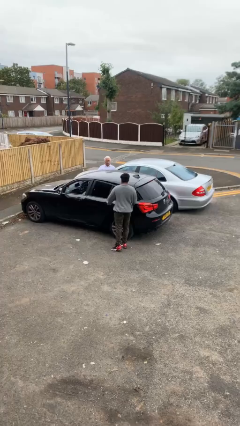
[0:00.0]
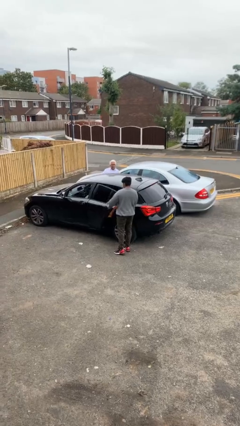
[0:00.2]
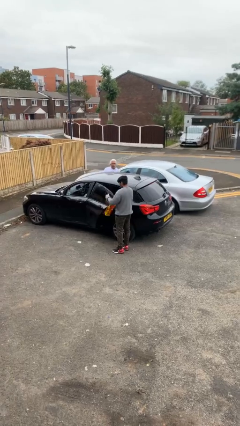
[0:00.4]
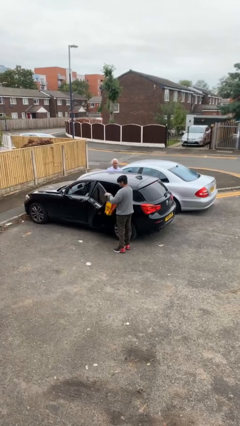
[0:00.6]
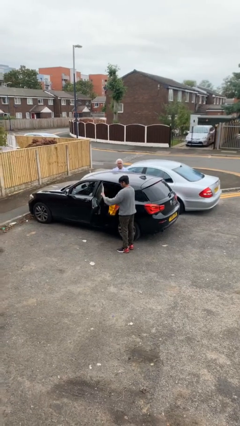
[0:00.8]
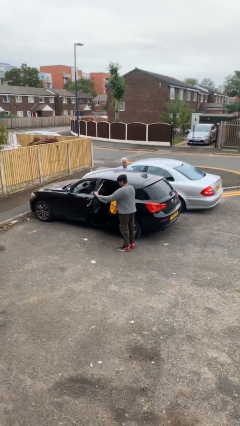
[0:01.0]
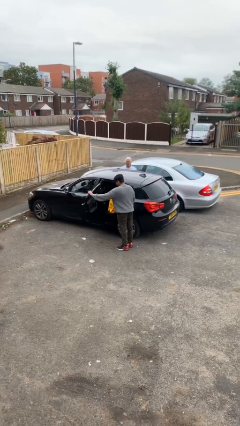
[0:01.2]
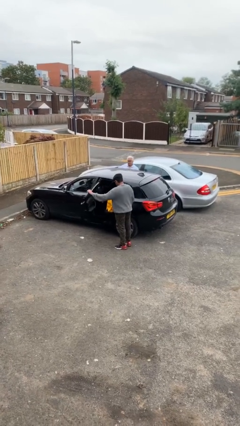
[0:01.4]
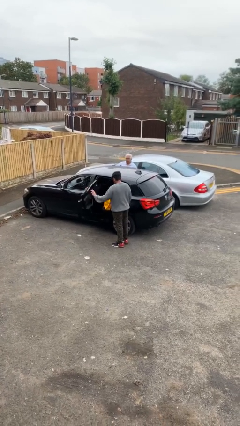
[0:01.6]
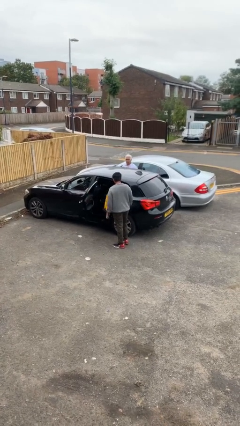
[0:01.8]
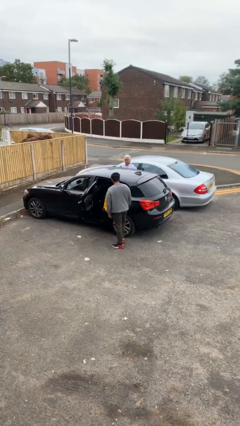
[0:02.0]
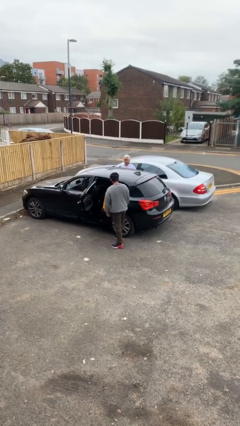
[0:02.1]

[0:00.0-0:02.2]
person opens car door

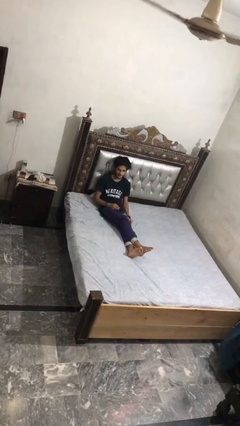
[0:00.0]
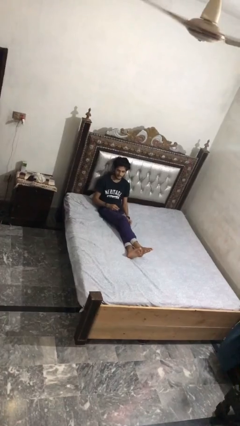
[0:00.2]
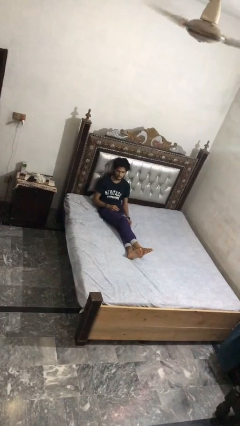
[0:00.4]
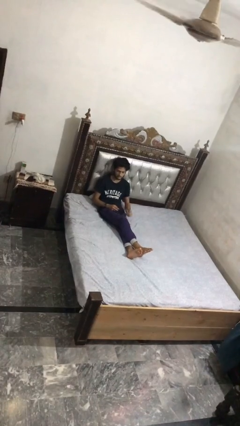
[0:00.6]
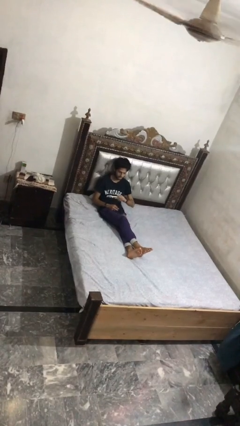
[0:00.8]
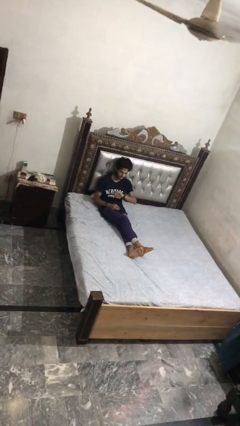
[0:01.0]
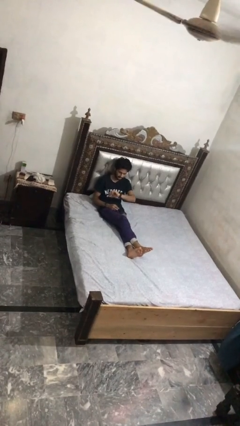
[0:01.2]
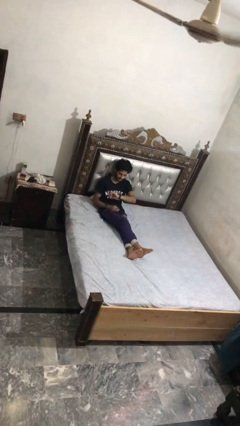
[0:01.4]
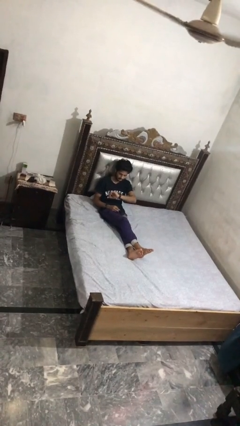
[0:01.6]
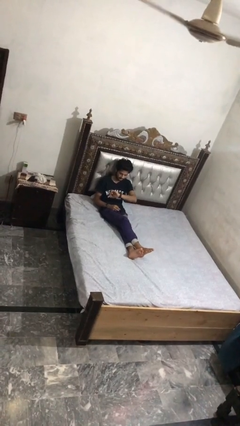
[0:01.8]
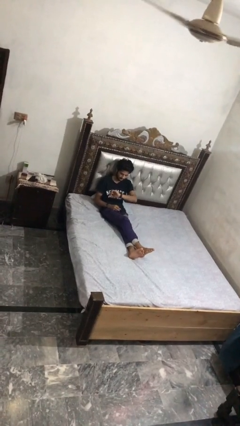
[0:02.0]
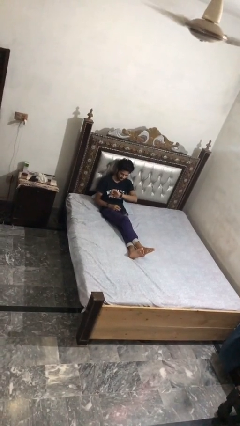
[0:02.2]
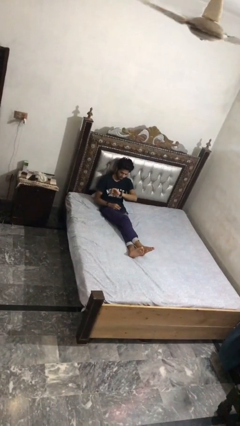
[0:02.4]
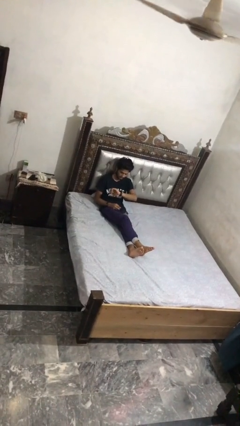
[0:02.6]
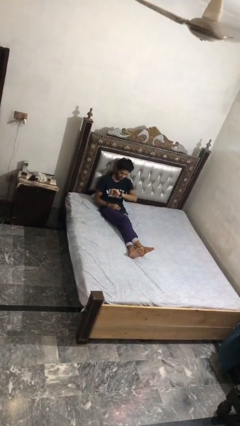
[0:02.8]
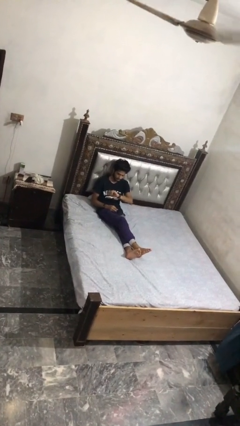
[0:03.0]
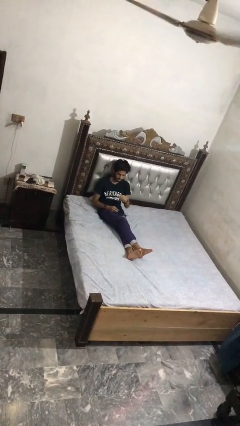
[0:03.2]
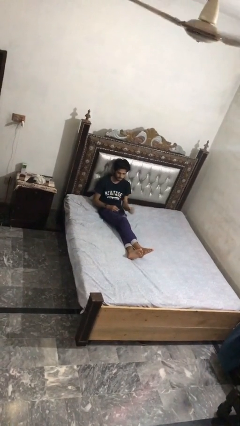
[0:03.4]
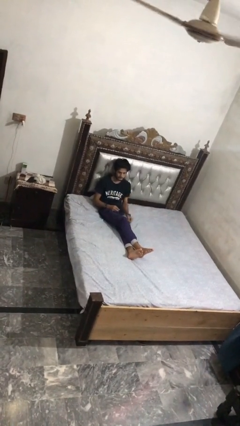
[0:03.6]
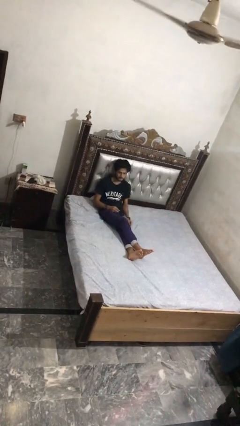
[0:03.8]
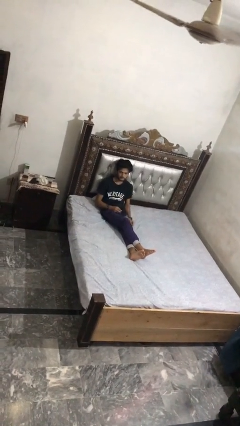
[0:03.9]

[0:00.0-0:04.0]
person looks at wristwatch

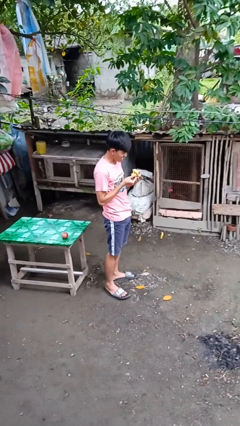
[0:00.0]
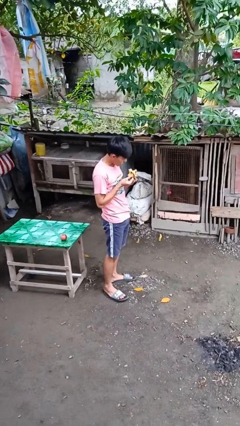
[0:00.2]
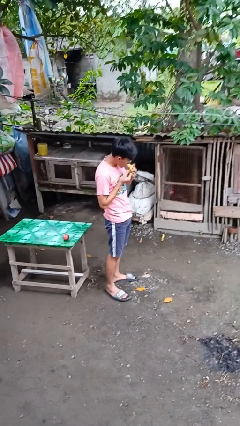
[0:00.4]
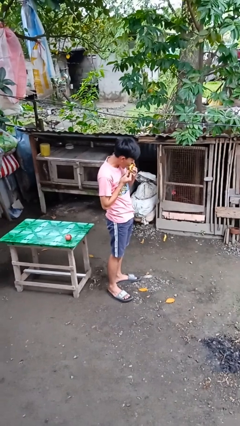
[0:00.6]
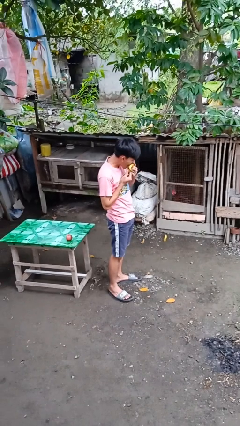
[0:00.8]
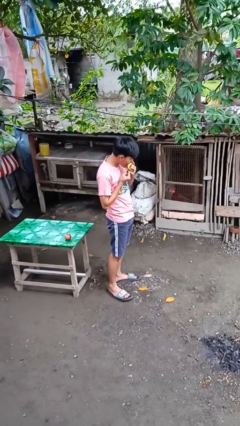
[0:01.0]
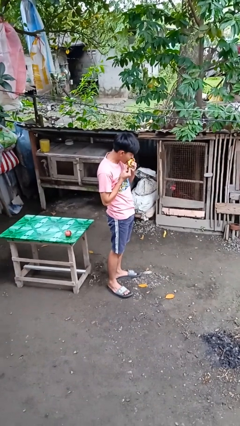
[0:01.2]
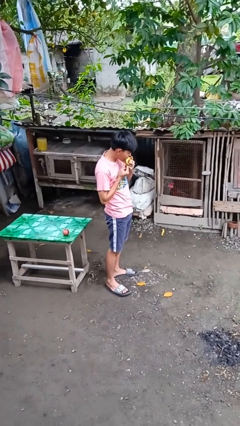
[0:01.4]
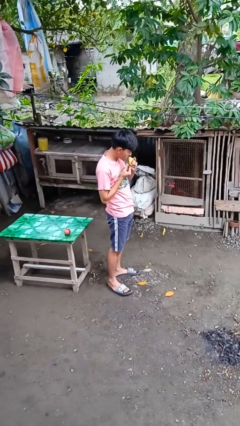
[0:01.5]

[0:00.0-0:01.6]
person eats banana

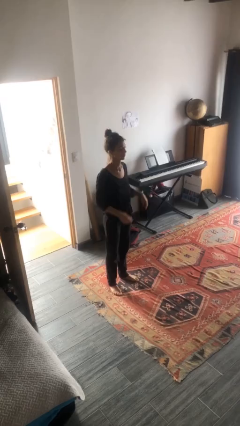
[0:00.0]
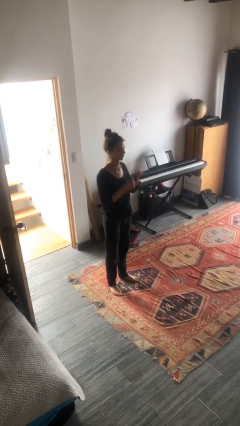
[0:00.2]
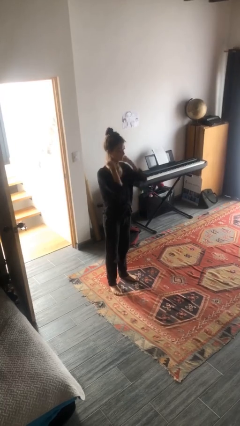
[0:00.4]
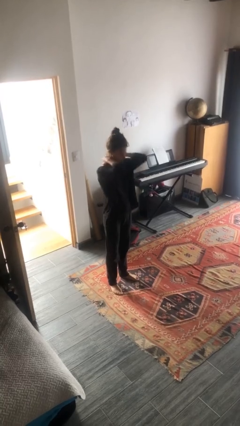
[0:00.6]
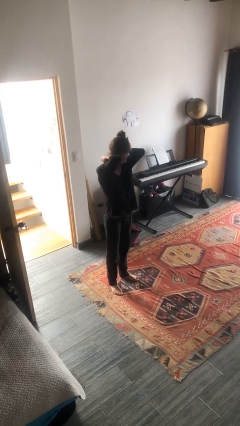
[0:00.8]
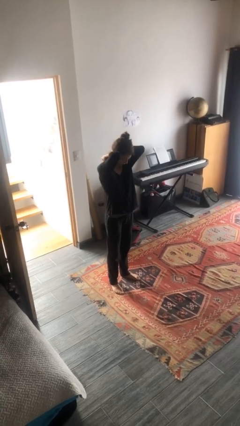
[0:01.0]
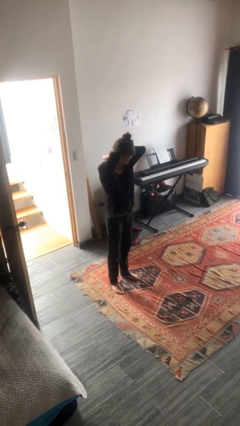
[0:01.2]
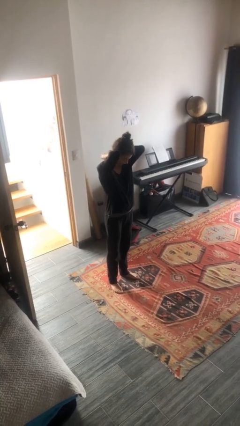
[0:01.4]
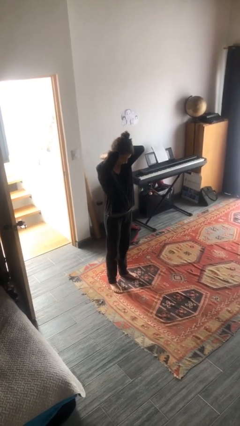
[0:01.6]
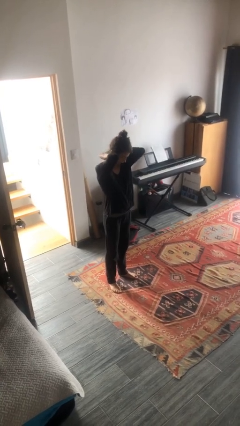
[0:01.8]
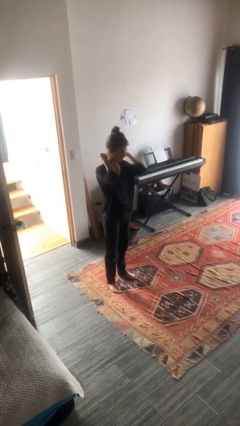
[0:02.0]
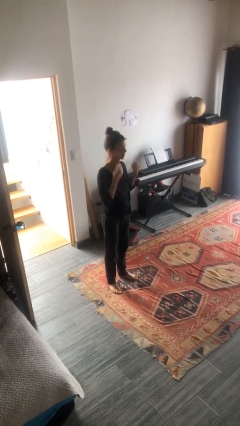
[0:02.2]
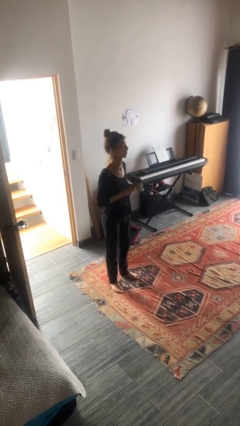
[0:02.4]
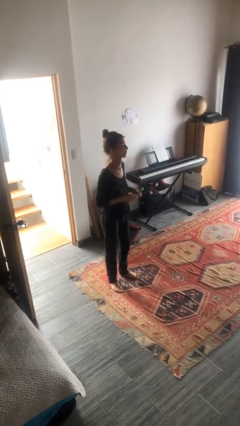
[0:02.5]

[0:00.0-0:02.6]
person takes off necklace

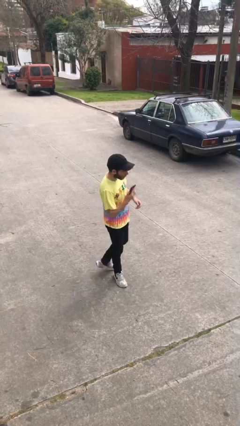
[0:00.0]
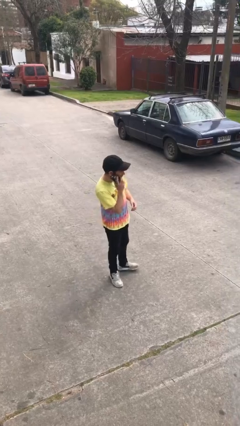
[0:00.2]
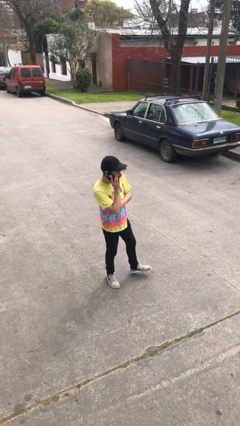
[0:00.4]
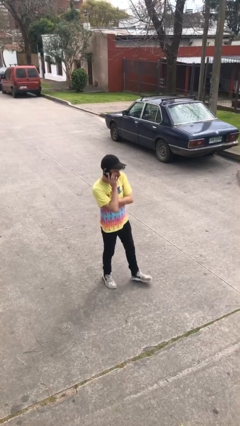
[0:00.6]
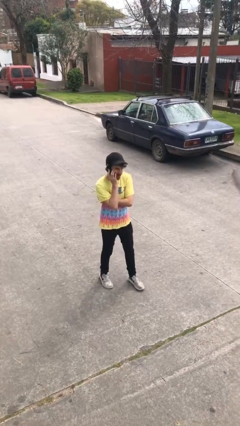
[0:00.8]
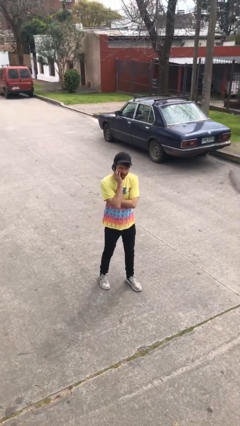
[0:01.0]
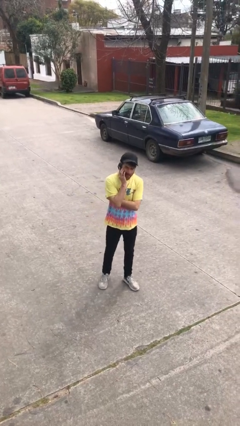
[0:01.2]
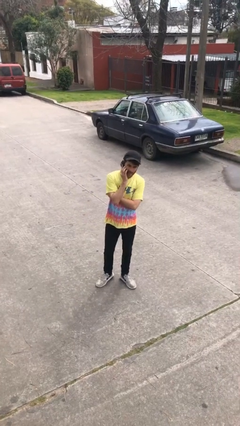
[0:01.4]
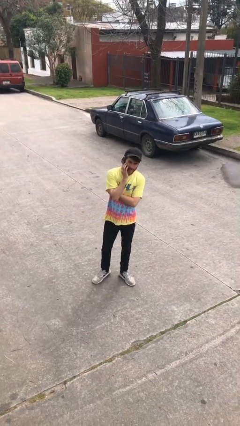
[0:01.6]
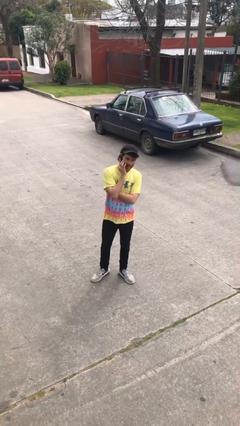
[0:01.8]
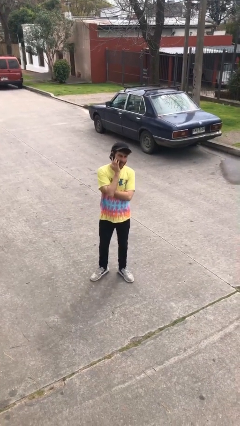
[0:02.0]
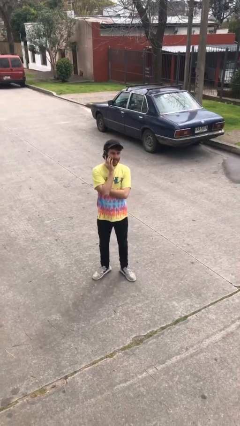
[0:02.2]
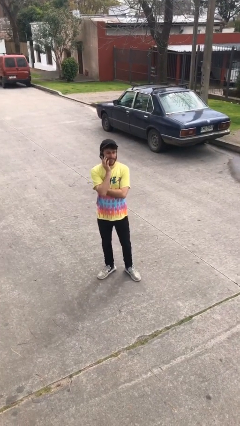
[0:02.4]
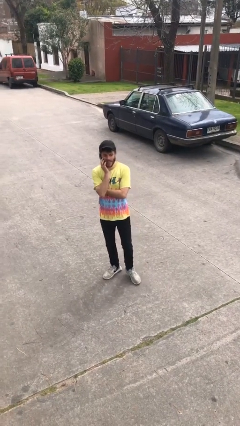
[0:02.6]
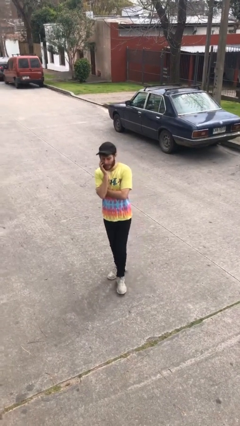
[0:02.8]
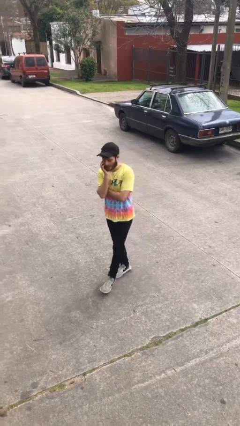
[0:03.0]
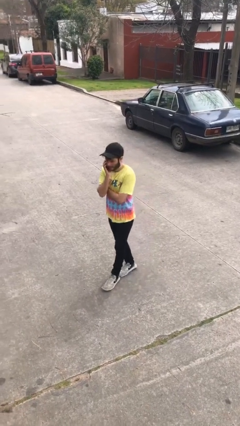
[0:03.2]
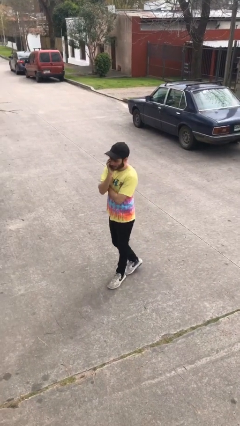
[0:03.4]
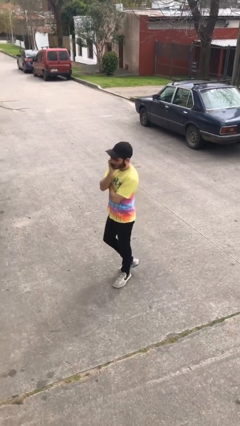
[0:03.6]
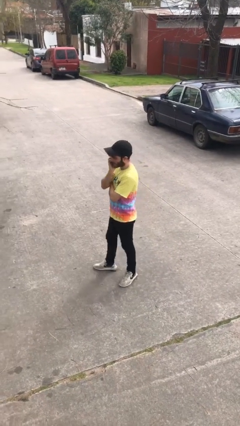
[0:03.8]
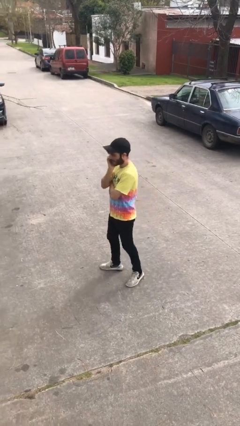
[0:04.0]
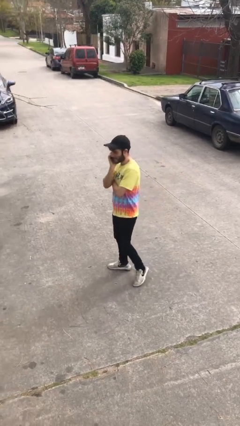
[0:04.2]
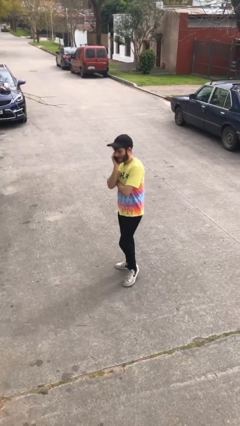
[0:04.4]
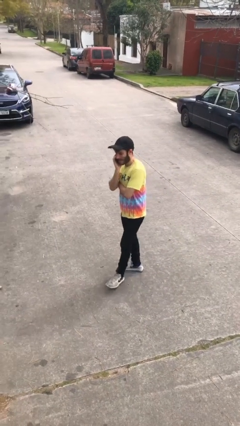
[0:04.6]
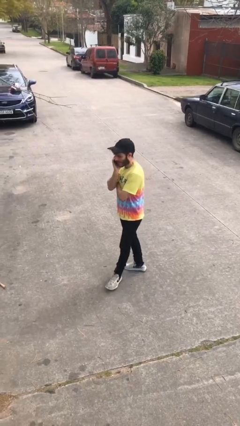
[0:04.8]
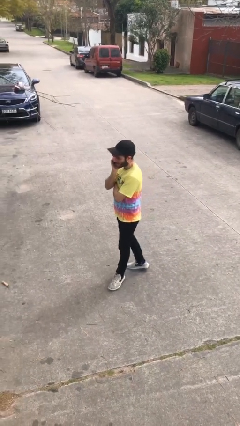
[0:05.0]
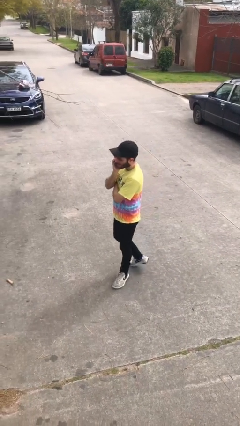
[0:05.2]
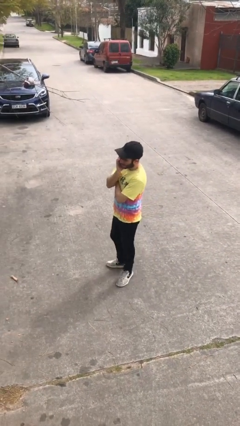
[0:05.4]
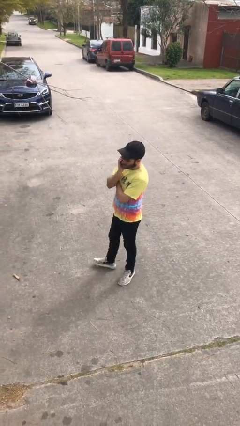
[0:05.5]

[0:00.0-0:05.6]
person talks on phone

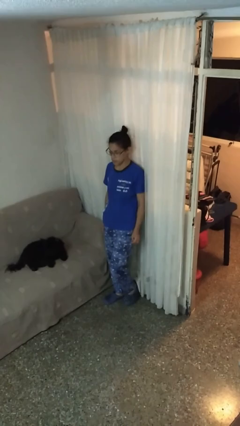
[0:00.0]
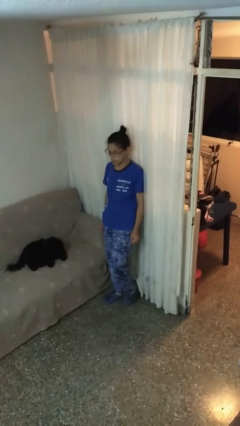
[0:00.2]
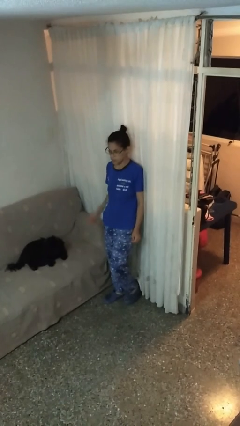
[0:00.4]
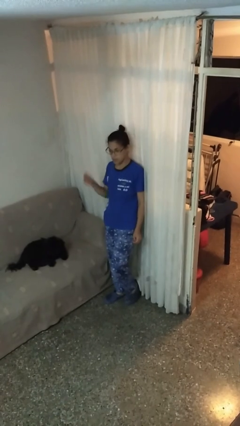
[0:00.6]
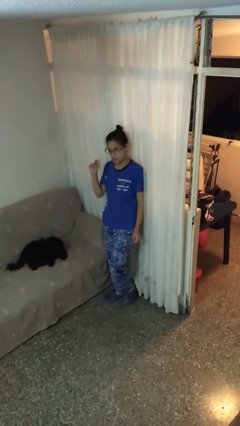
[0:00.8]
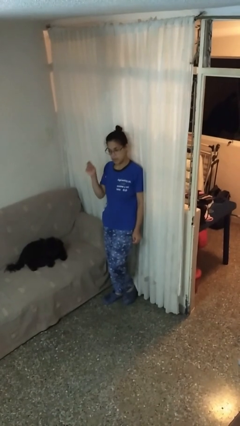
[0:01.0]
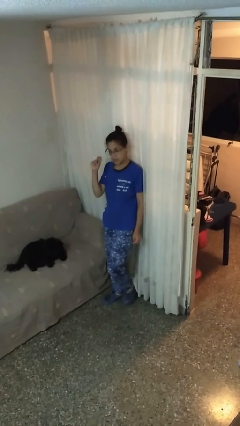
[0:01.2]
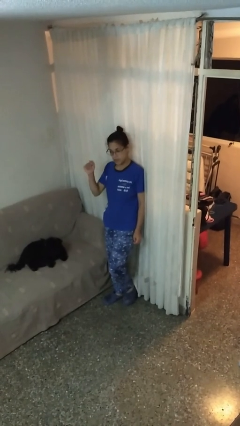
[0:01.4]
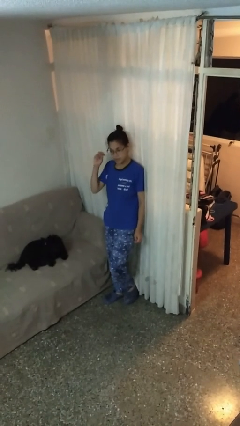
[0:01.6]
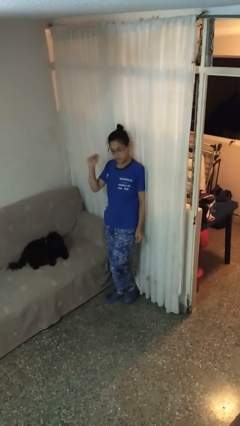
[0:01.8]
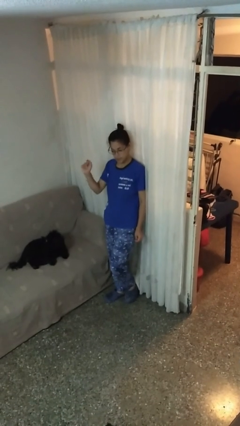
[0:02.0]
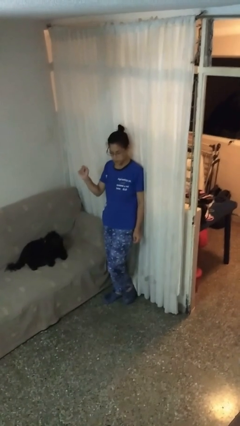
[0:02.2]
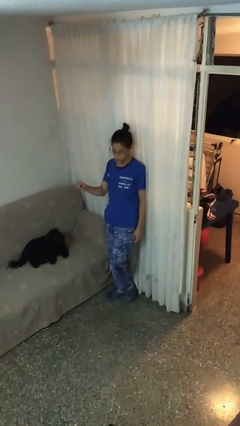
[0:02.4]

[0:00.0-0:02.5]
person snaps fingers
